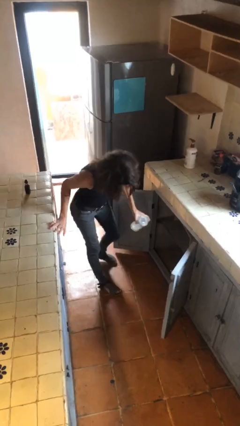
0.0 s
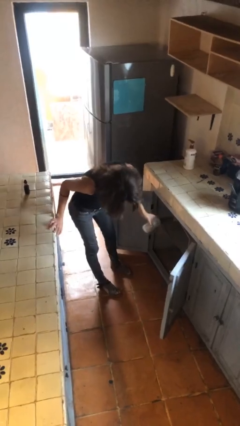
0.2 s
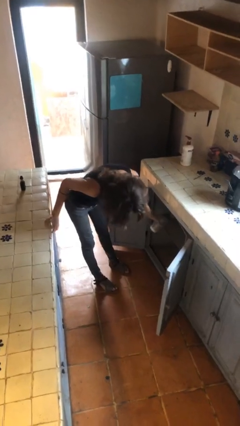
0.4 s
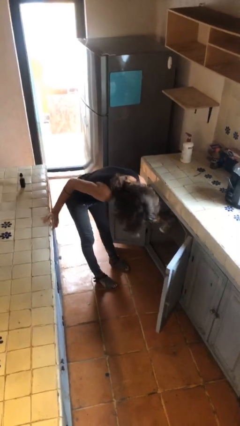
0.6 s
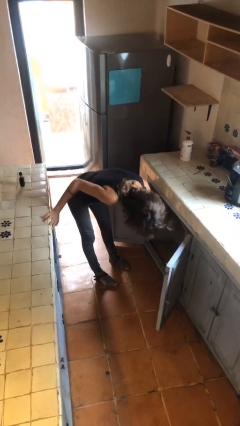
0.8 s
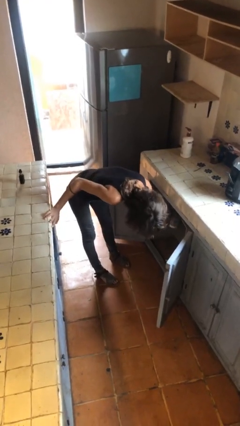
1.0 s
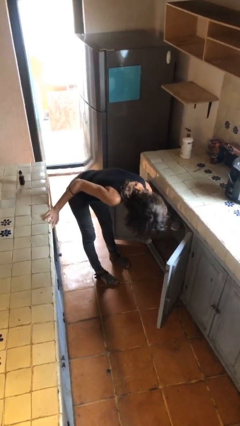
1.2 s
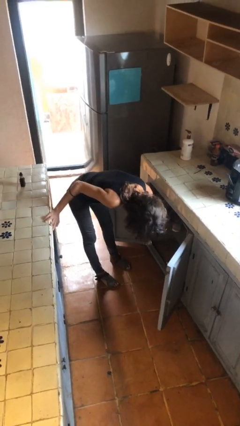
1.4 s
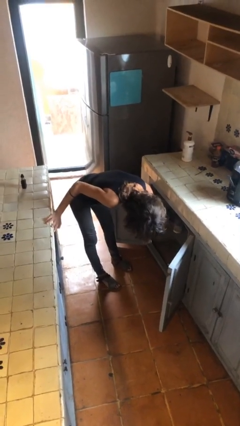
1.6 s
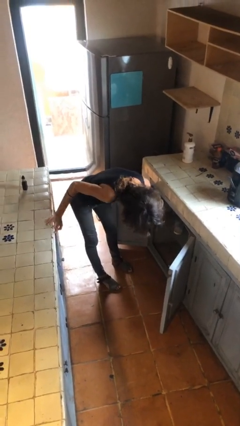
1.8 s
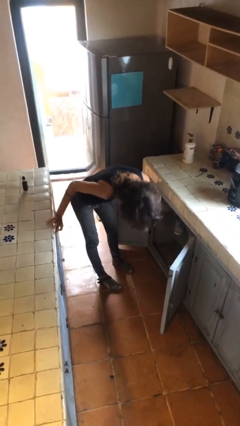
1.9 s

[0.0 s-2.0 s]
person puts down object into cabinet

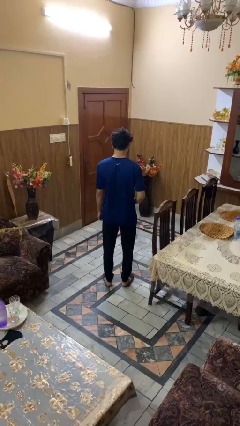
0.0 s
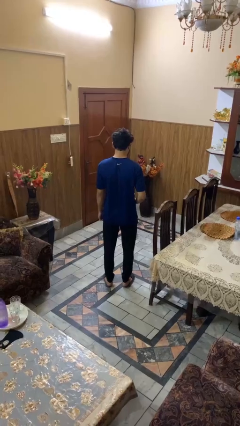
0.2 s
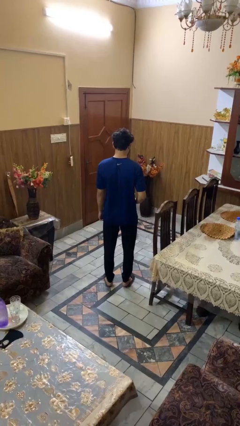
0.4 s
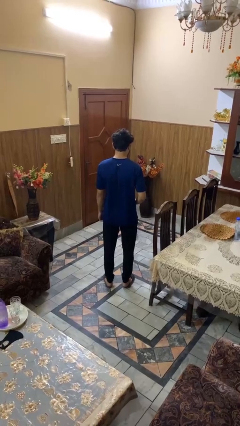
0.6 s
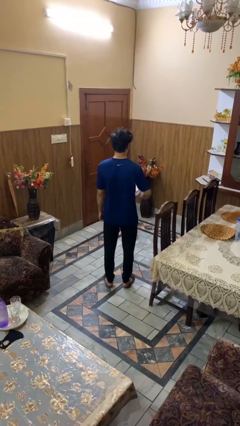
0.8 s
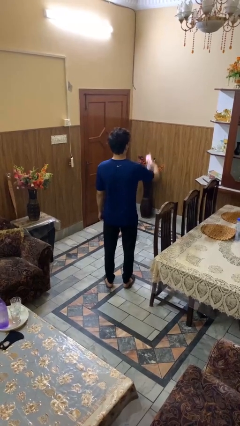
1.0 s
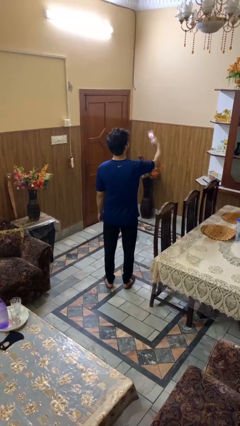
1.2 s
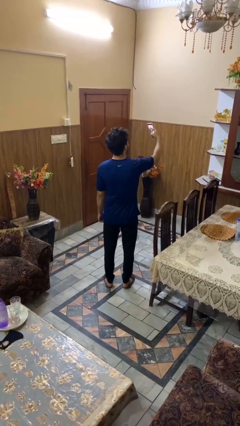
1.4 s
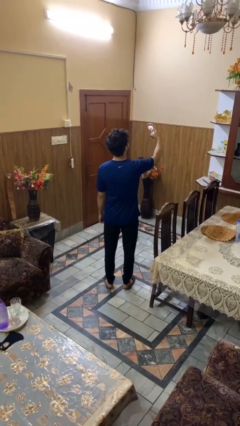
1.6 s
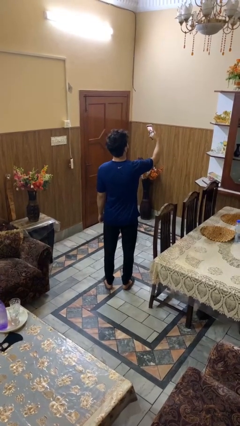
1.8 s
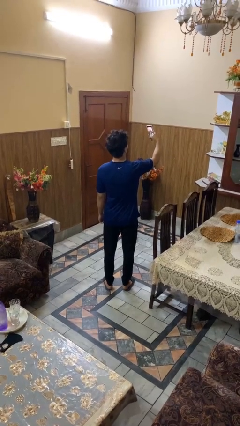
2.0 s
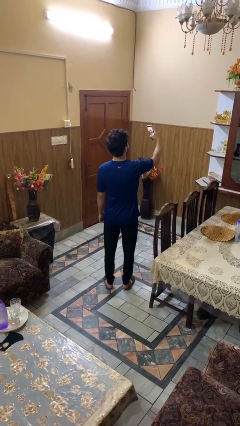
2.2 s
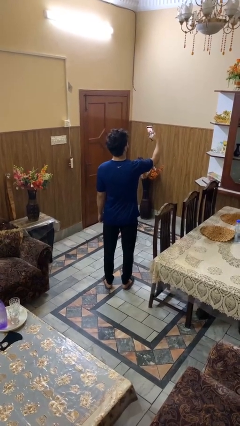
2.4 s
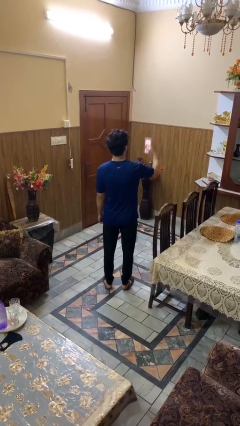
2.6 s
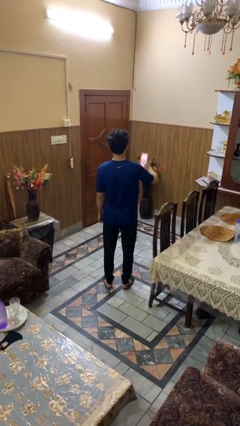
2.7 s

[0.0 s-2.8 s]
person takes selfie

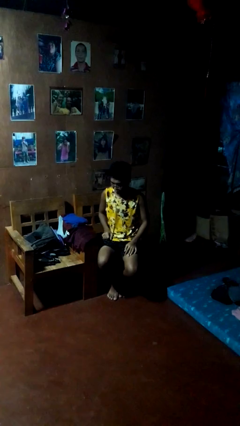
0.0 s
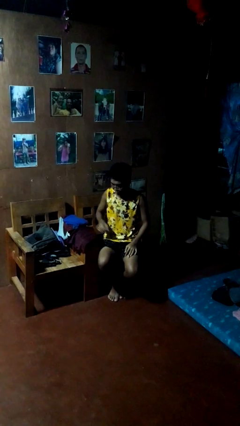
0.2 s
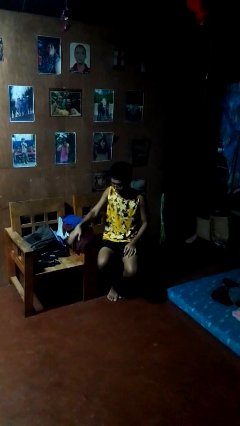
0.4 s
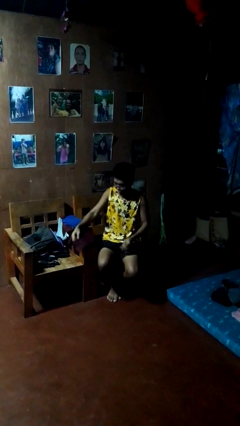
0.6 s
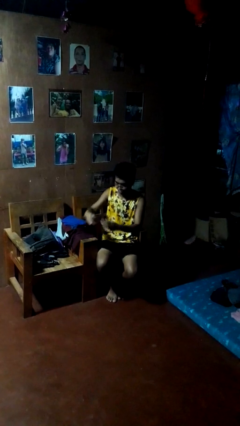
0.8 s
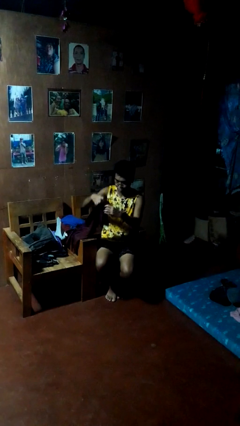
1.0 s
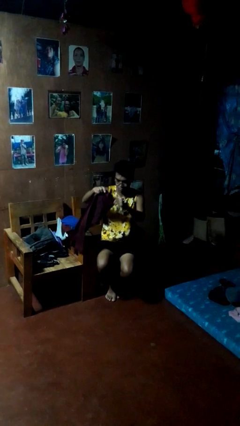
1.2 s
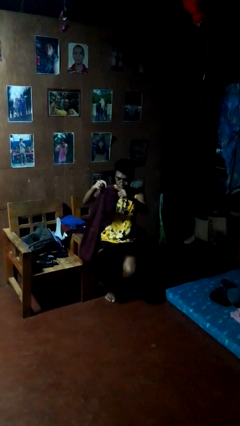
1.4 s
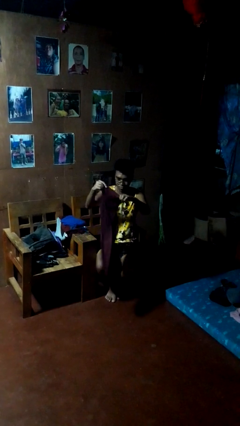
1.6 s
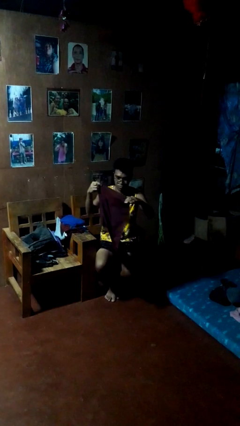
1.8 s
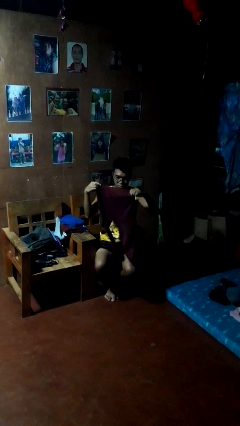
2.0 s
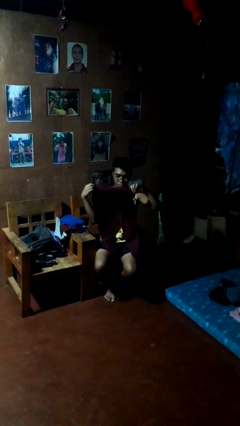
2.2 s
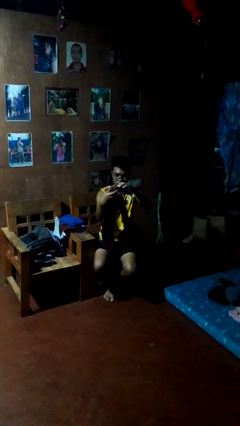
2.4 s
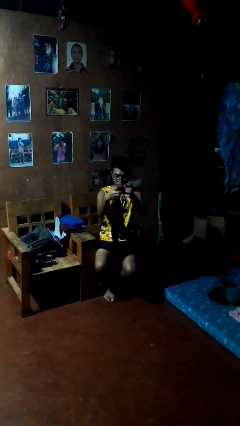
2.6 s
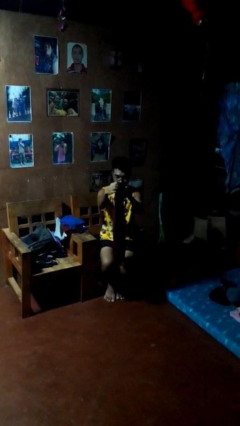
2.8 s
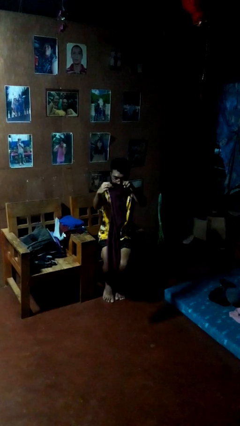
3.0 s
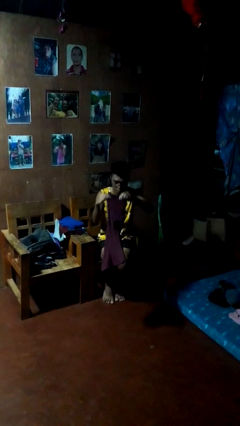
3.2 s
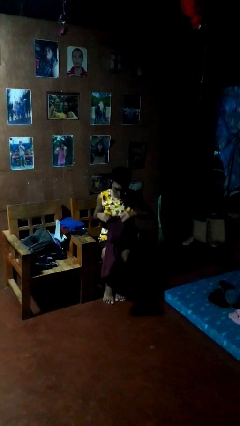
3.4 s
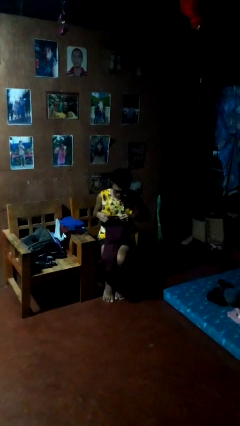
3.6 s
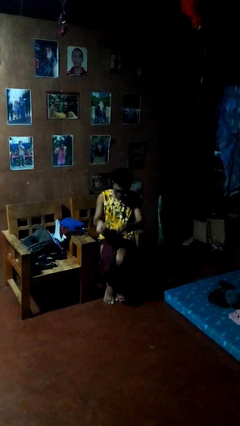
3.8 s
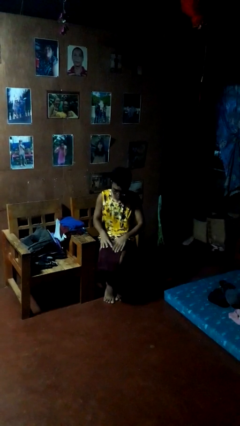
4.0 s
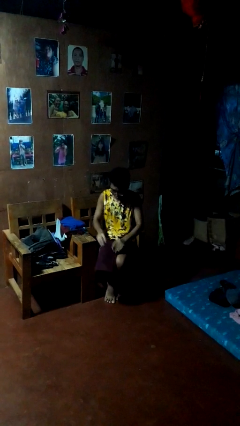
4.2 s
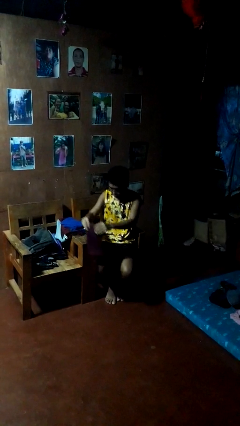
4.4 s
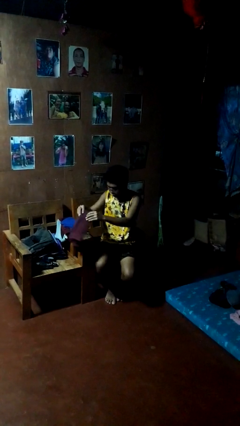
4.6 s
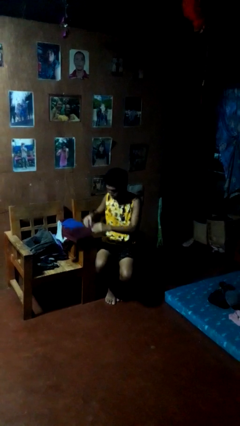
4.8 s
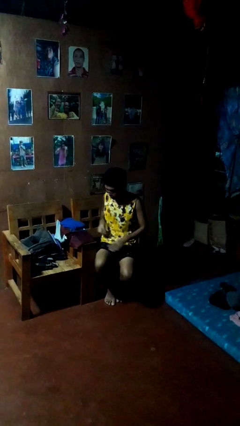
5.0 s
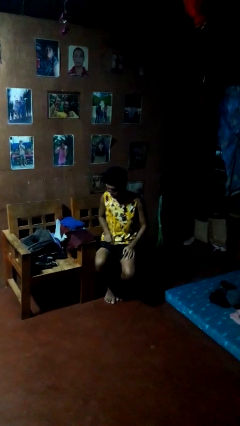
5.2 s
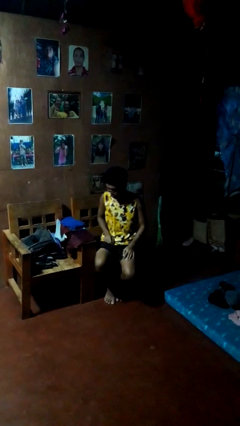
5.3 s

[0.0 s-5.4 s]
person folds pants

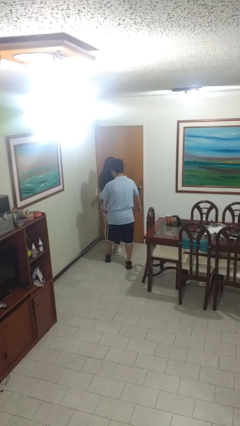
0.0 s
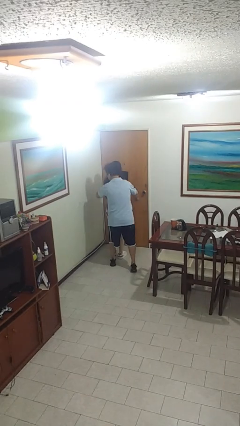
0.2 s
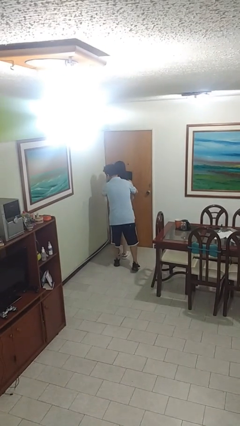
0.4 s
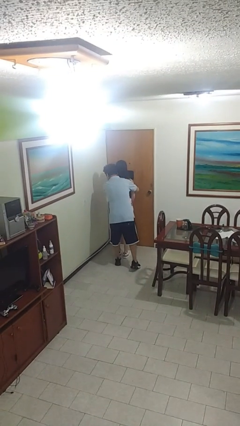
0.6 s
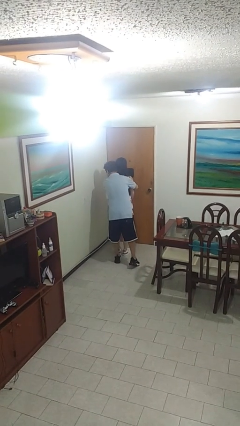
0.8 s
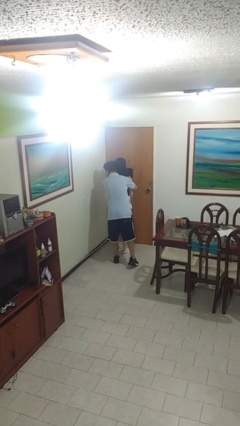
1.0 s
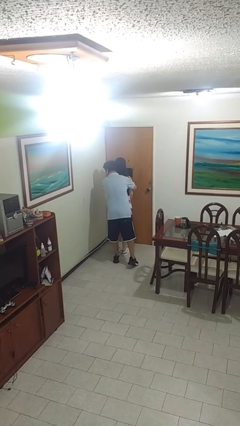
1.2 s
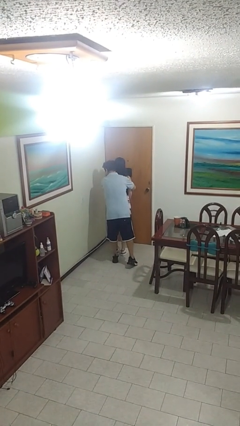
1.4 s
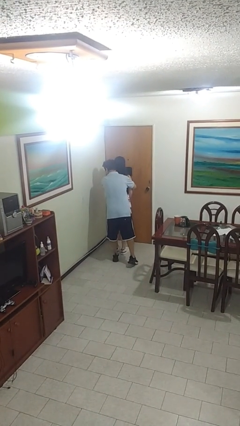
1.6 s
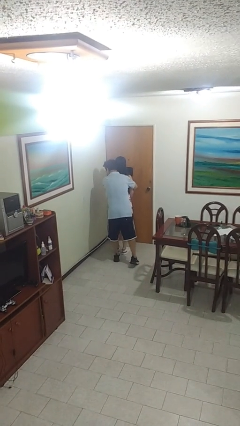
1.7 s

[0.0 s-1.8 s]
person hugs person from behind

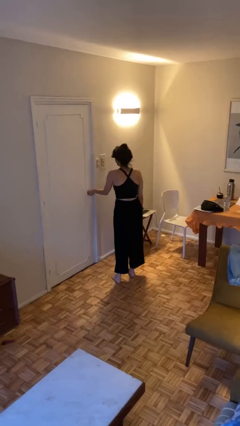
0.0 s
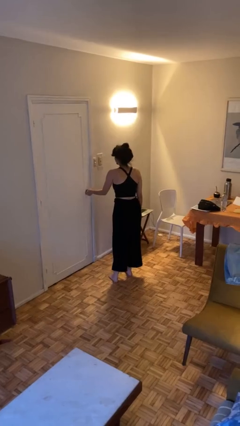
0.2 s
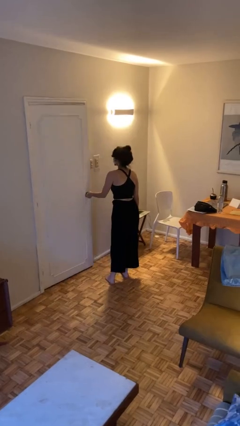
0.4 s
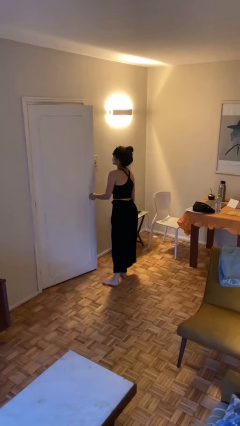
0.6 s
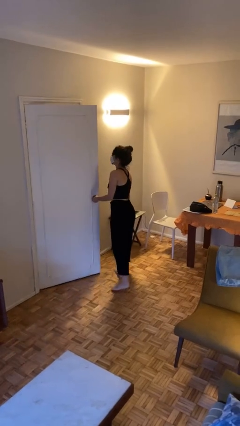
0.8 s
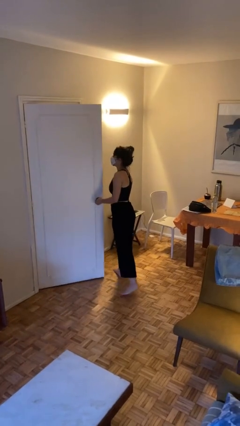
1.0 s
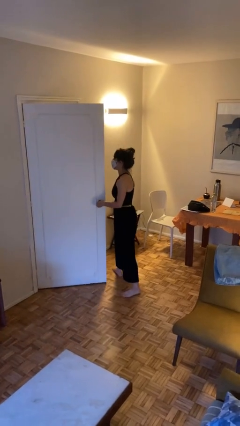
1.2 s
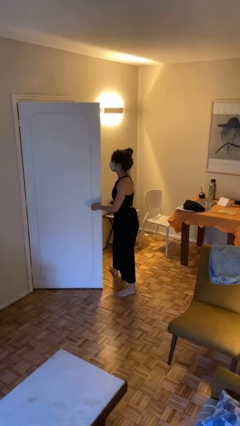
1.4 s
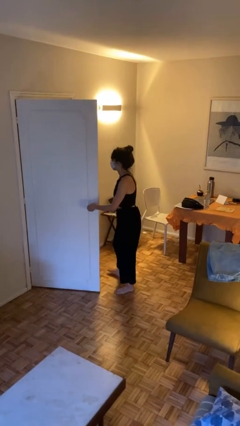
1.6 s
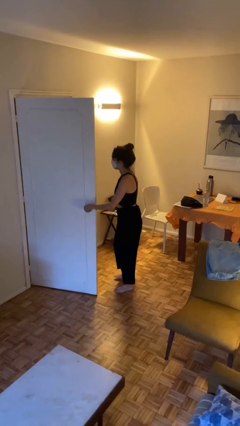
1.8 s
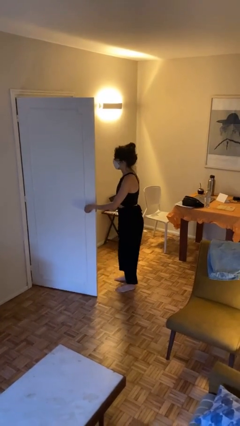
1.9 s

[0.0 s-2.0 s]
person opens facility door

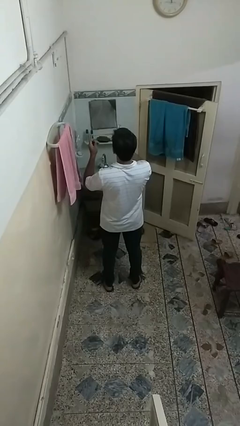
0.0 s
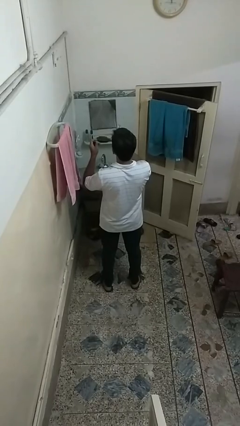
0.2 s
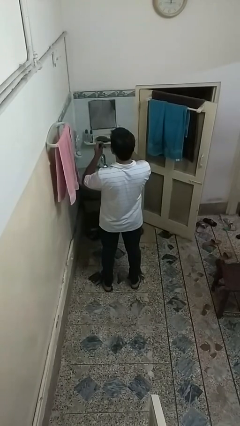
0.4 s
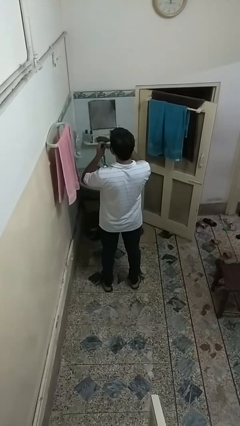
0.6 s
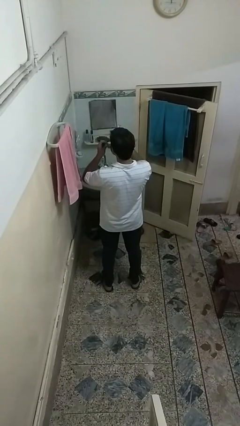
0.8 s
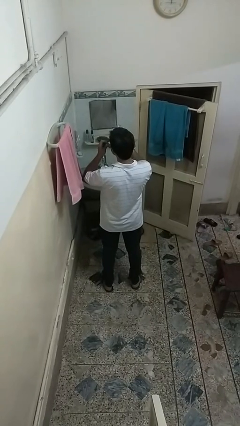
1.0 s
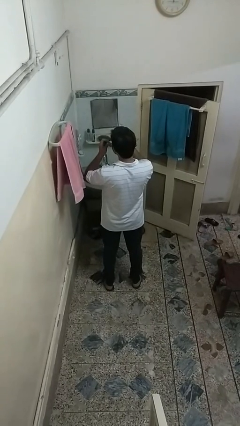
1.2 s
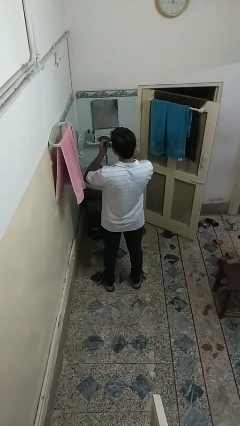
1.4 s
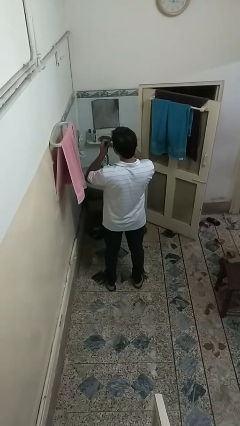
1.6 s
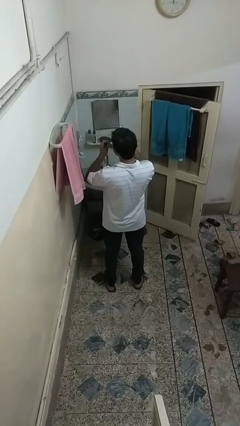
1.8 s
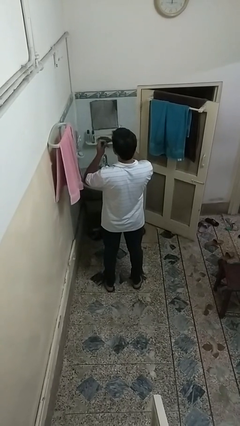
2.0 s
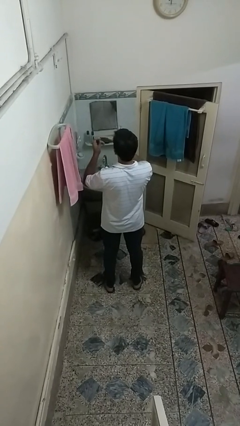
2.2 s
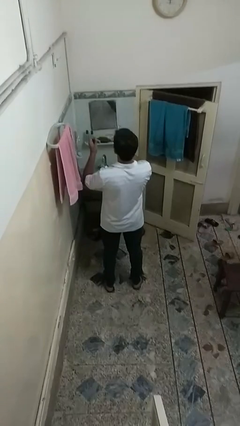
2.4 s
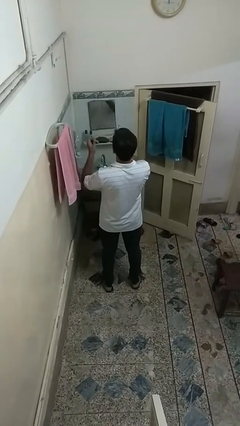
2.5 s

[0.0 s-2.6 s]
person flosses

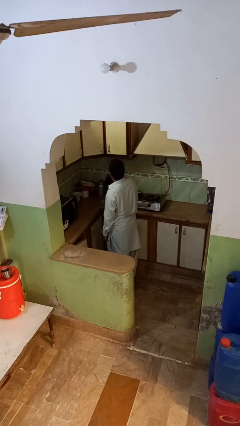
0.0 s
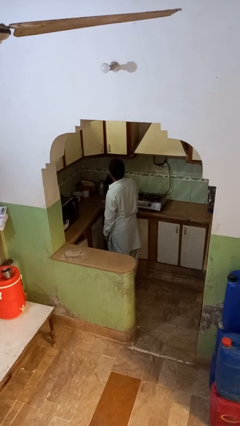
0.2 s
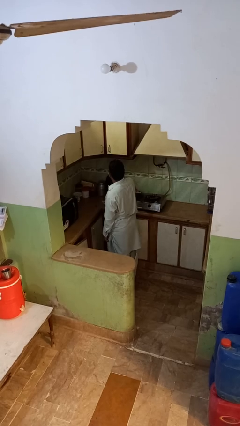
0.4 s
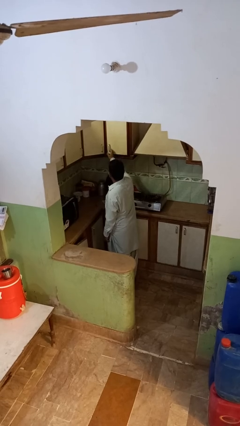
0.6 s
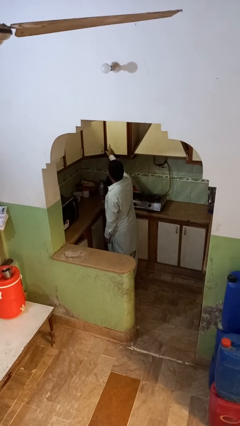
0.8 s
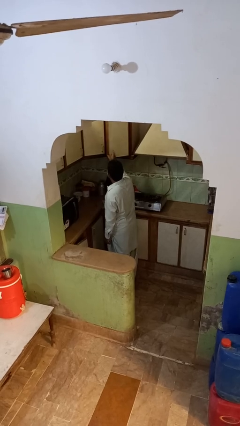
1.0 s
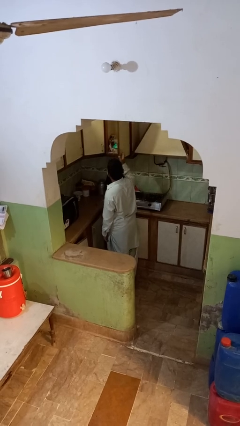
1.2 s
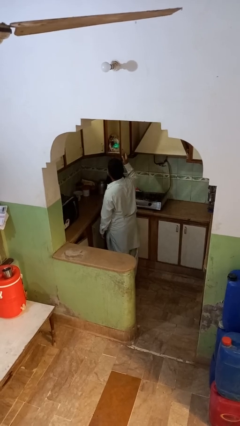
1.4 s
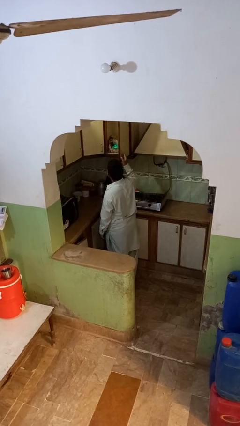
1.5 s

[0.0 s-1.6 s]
person opens cabinet
